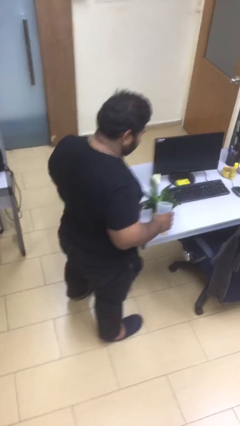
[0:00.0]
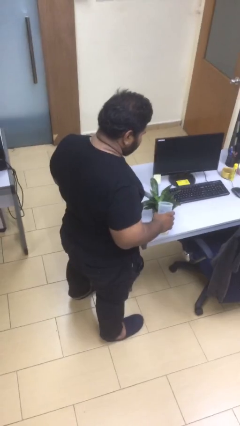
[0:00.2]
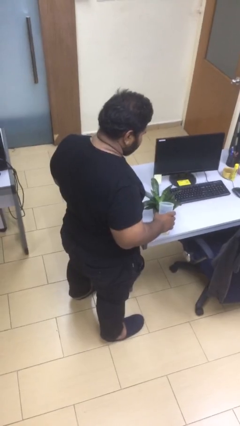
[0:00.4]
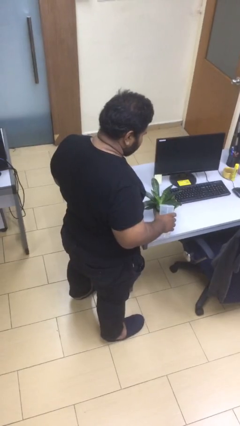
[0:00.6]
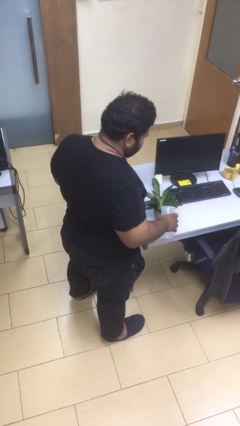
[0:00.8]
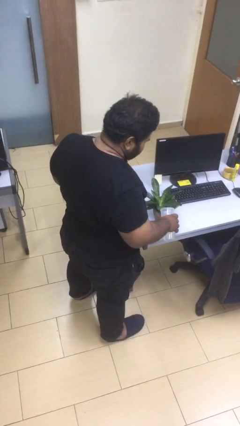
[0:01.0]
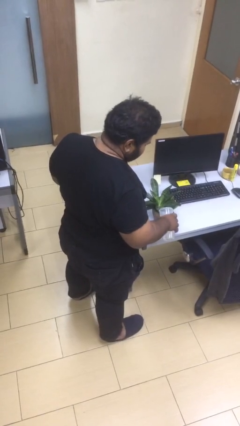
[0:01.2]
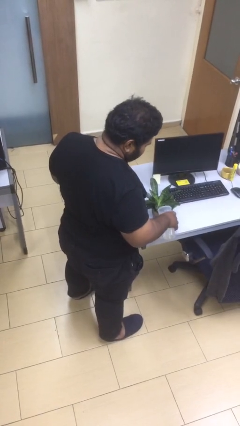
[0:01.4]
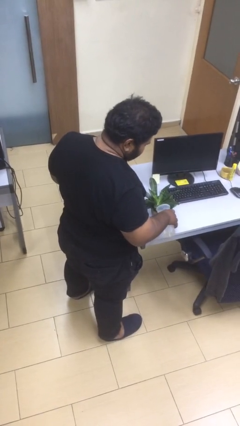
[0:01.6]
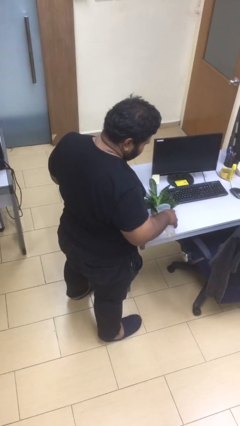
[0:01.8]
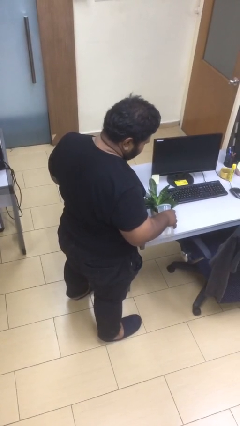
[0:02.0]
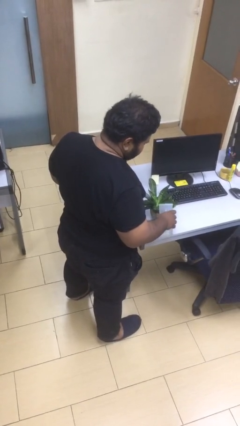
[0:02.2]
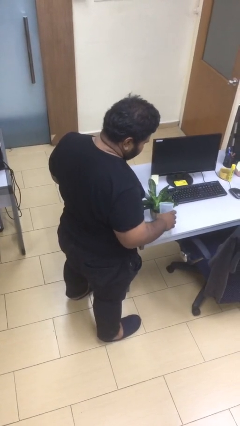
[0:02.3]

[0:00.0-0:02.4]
person waters houseplant

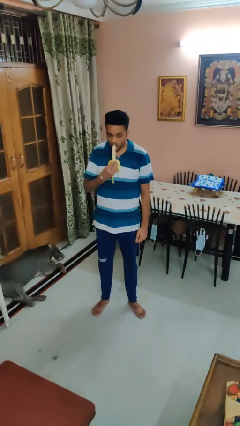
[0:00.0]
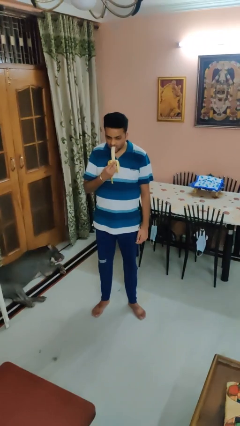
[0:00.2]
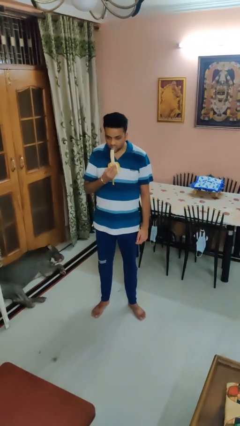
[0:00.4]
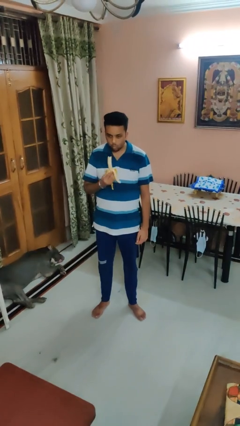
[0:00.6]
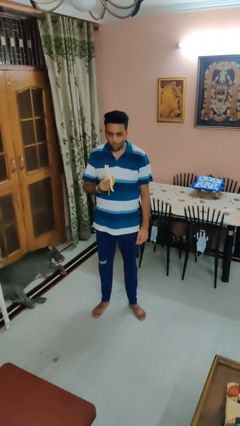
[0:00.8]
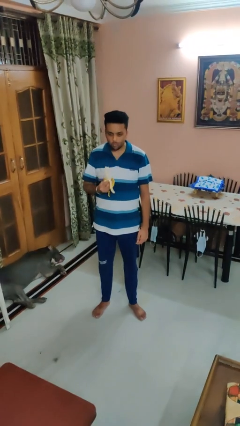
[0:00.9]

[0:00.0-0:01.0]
person eats banana

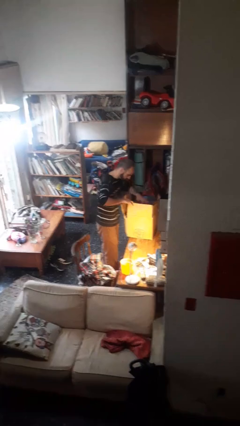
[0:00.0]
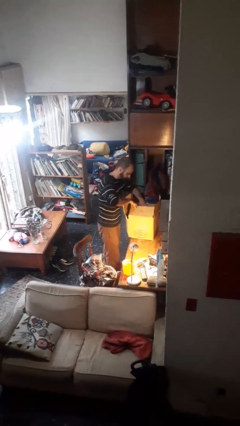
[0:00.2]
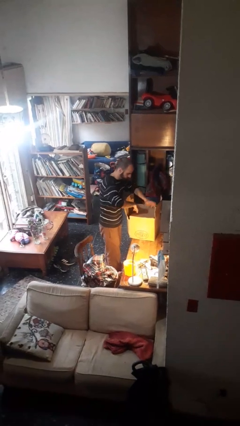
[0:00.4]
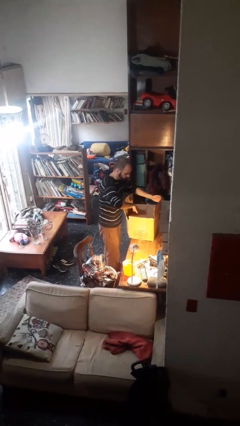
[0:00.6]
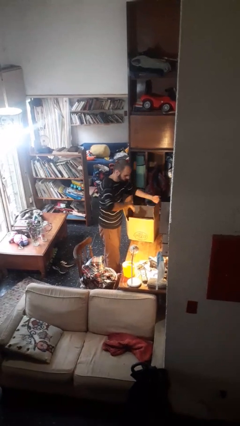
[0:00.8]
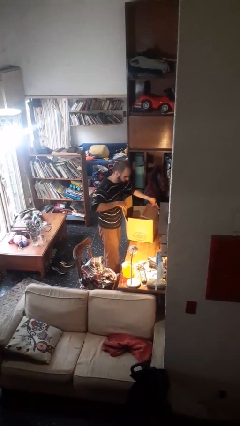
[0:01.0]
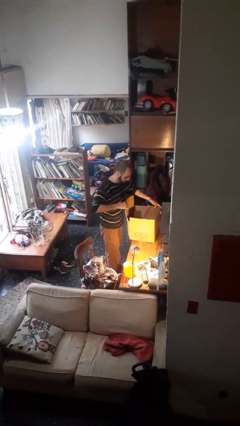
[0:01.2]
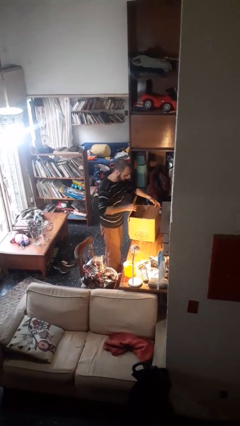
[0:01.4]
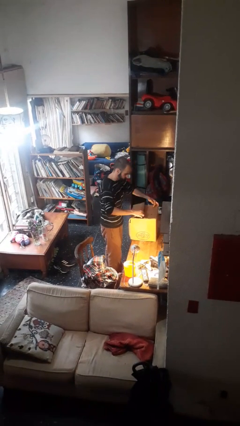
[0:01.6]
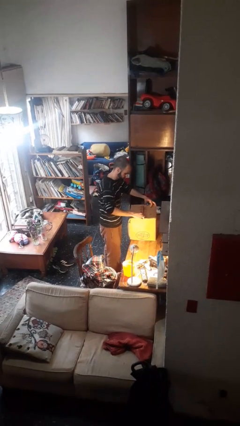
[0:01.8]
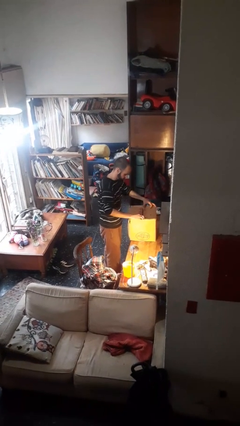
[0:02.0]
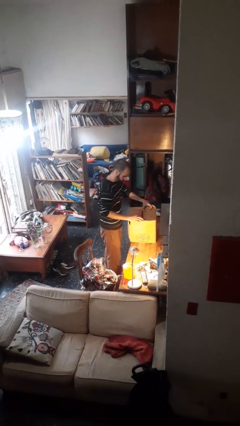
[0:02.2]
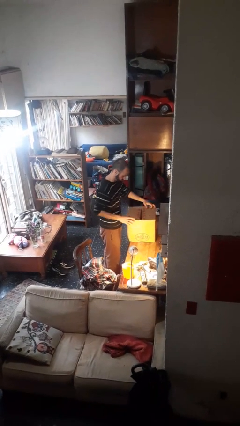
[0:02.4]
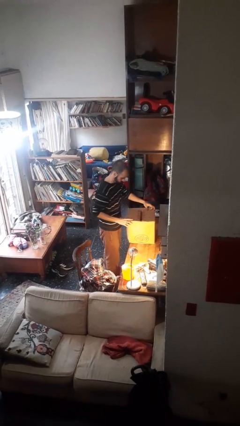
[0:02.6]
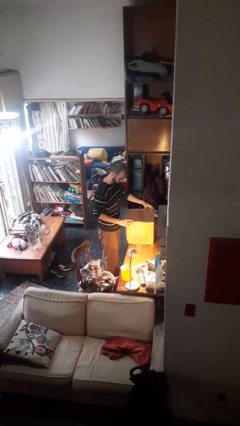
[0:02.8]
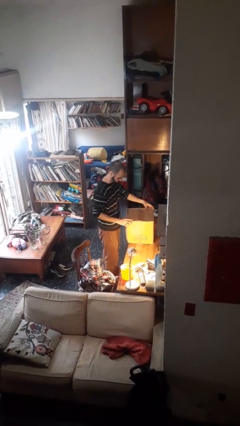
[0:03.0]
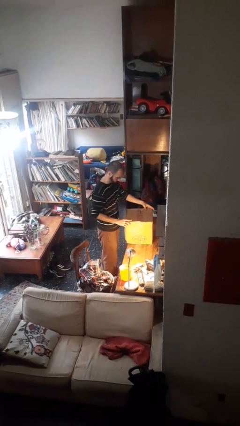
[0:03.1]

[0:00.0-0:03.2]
person closes box

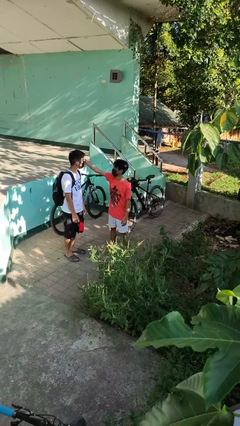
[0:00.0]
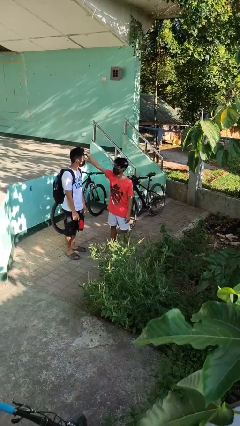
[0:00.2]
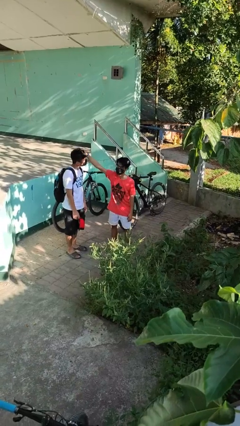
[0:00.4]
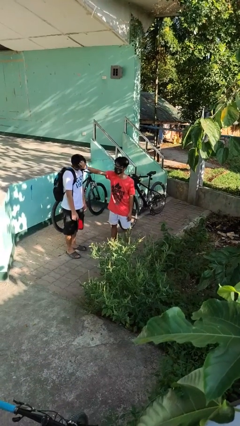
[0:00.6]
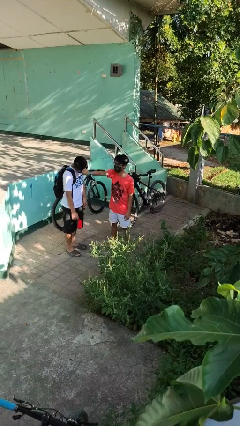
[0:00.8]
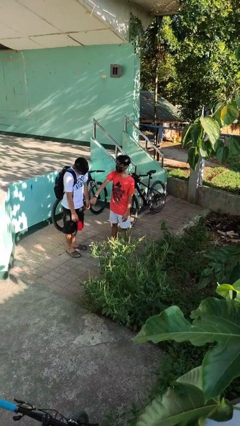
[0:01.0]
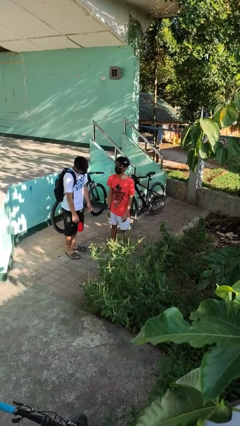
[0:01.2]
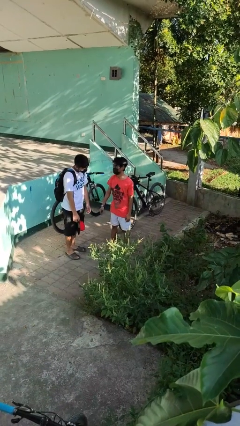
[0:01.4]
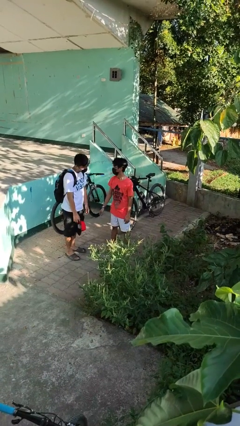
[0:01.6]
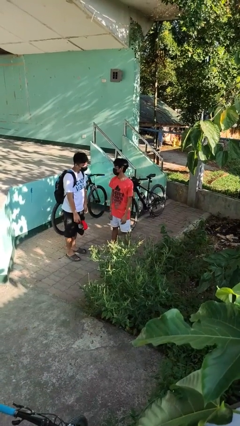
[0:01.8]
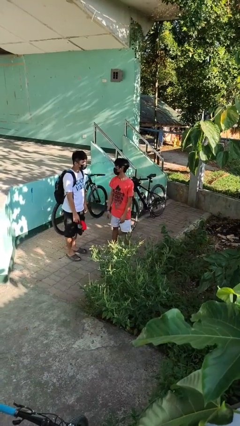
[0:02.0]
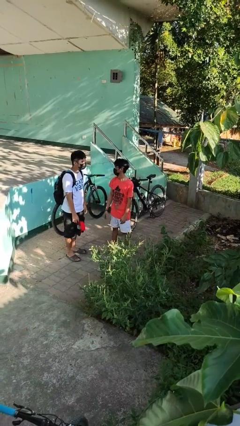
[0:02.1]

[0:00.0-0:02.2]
person grabs person by hair

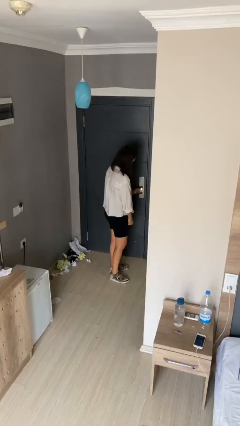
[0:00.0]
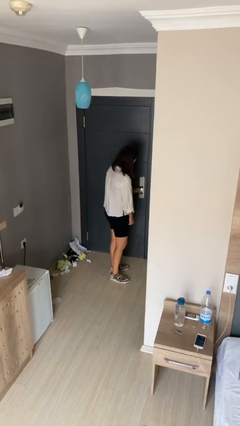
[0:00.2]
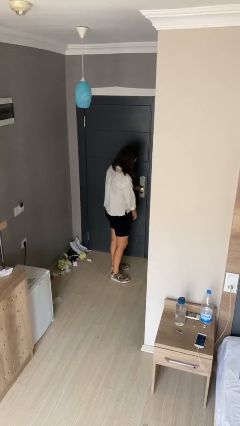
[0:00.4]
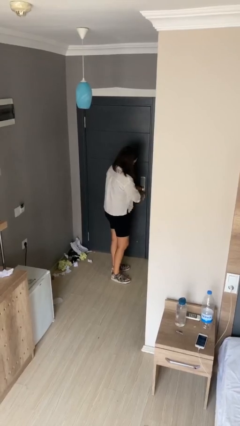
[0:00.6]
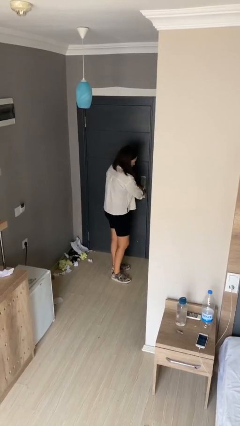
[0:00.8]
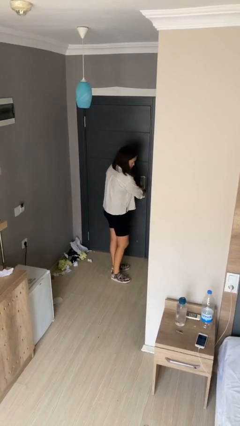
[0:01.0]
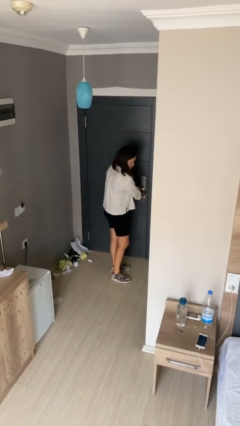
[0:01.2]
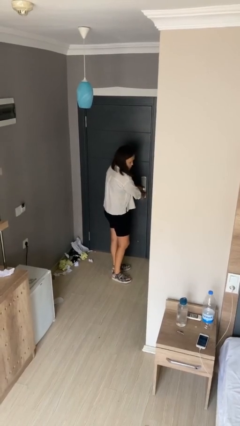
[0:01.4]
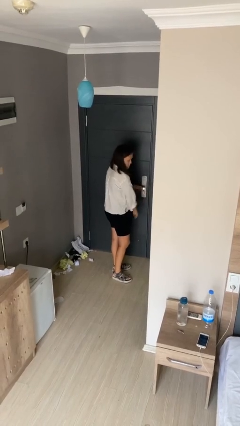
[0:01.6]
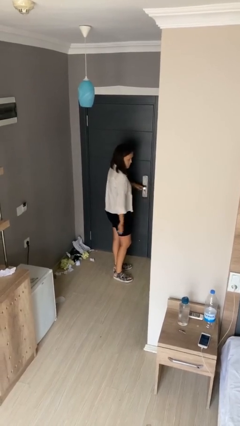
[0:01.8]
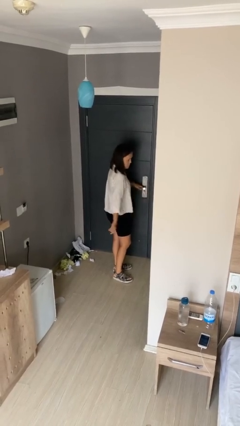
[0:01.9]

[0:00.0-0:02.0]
person locks door with keys

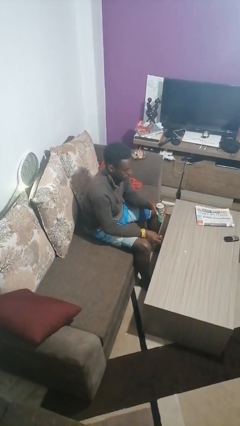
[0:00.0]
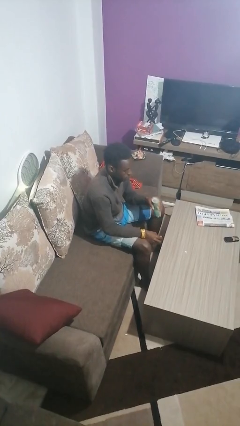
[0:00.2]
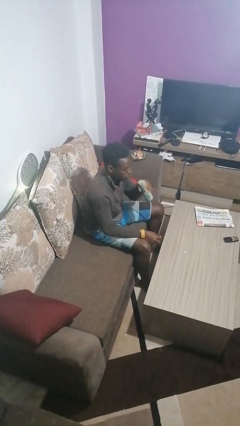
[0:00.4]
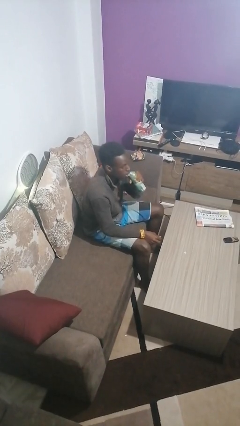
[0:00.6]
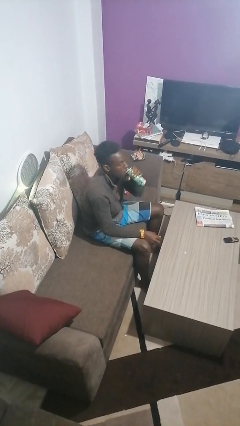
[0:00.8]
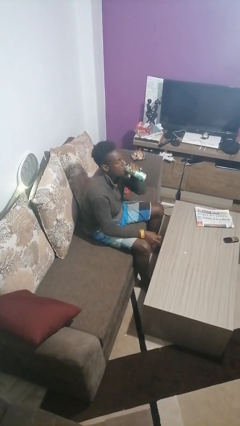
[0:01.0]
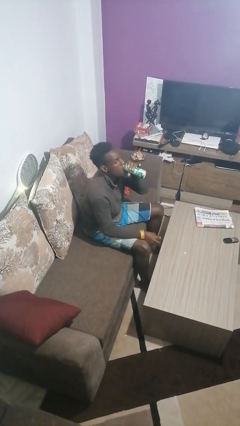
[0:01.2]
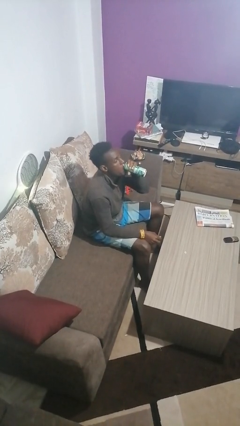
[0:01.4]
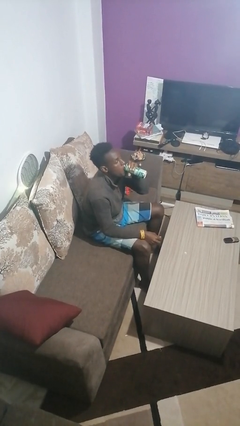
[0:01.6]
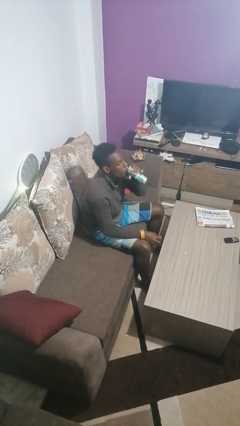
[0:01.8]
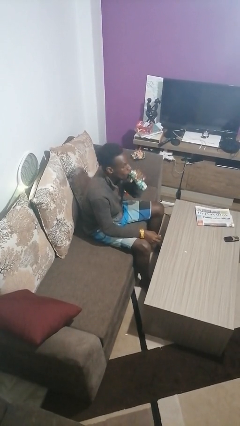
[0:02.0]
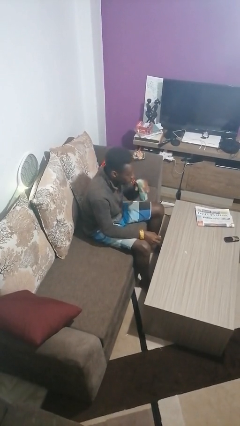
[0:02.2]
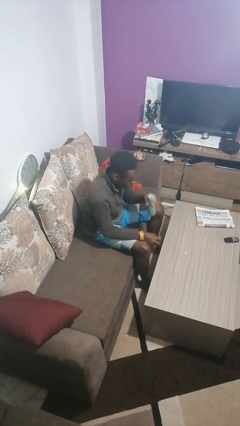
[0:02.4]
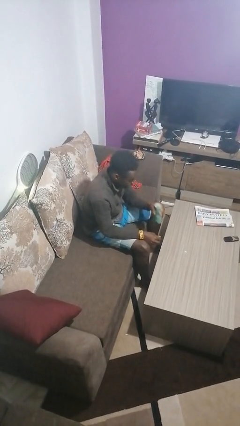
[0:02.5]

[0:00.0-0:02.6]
person drinks from beverage can

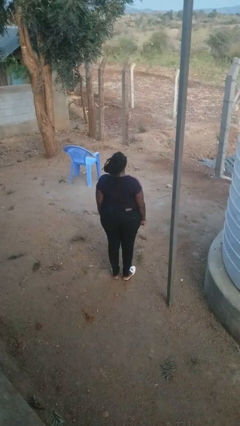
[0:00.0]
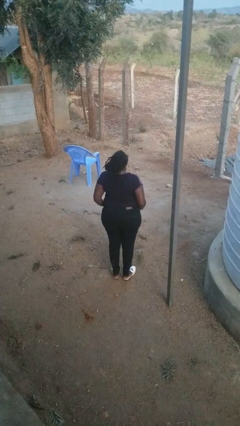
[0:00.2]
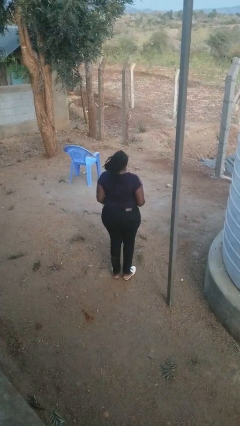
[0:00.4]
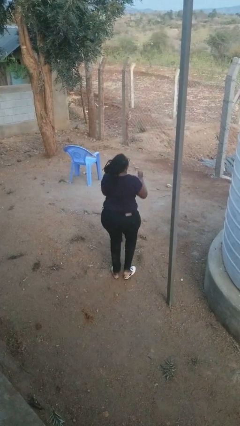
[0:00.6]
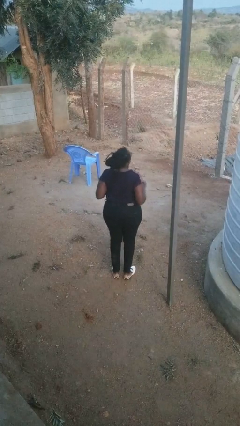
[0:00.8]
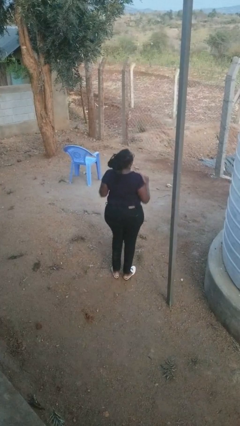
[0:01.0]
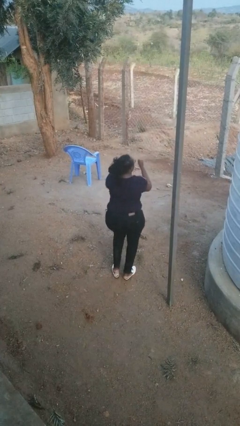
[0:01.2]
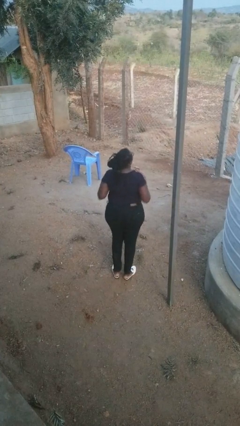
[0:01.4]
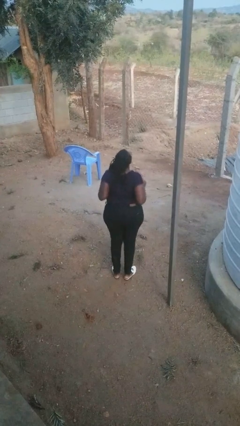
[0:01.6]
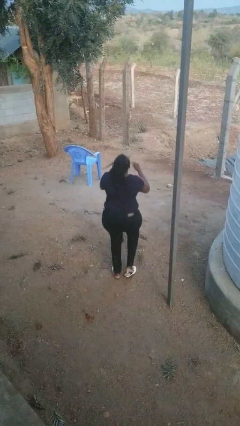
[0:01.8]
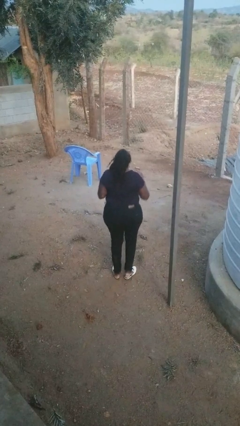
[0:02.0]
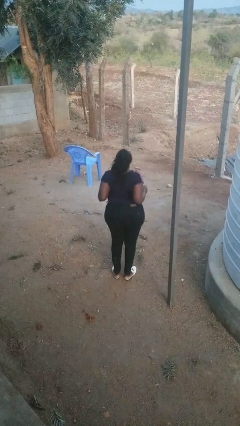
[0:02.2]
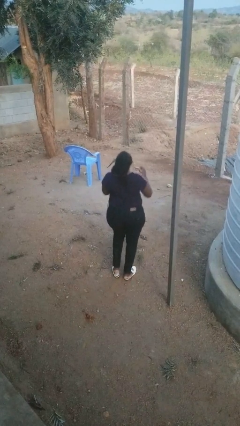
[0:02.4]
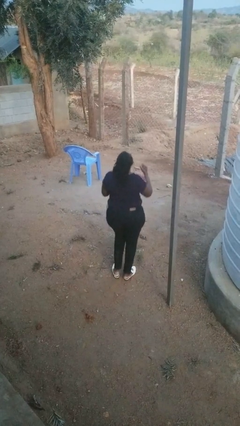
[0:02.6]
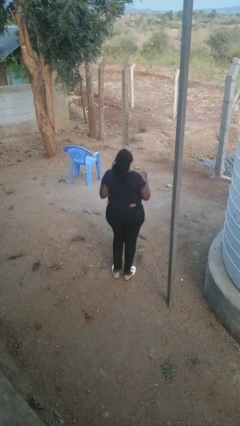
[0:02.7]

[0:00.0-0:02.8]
person dances in place

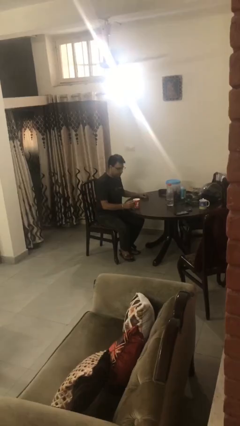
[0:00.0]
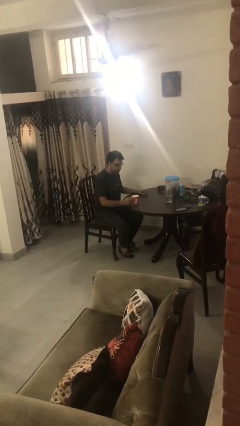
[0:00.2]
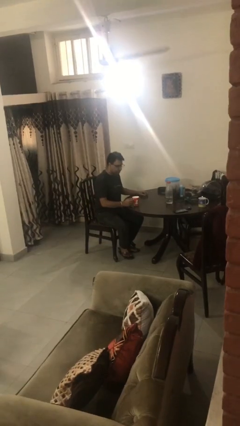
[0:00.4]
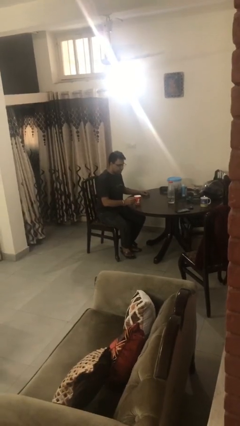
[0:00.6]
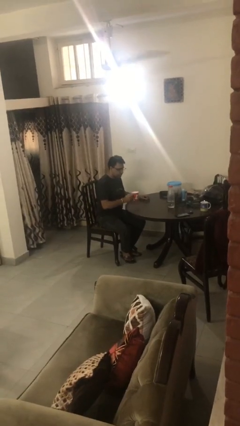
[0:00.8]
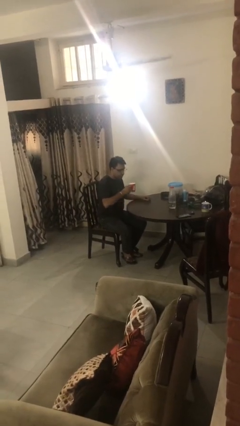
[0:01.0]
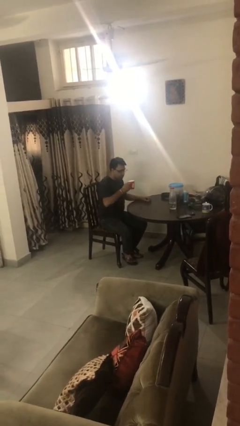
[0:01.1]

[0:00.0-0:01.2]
person picks up object from table
